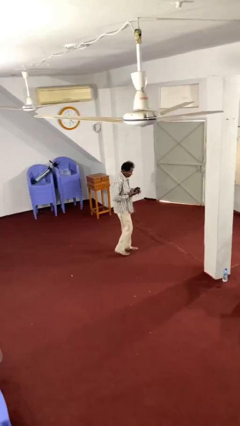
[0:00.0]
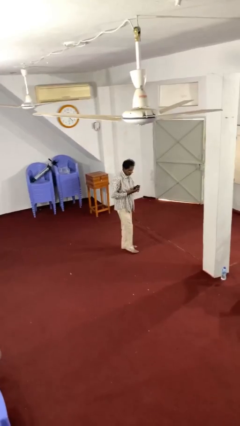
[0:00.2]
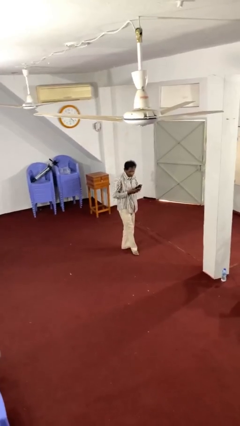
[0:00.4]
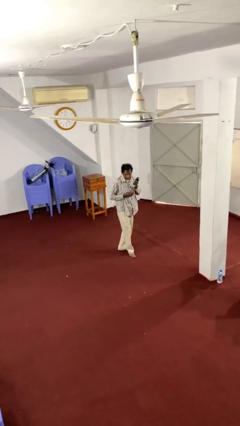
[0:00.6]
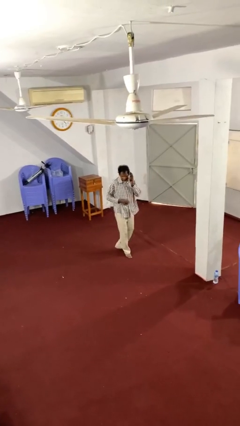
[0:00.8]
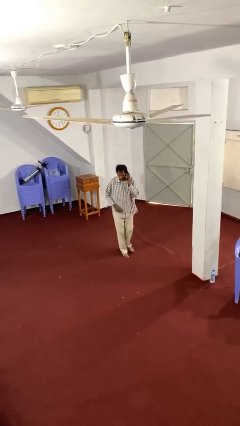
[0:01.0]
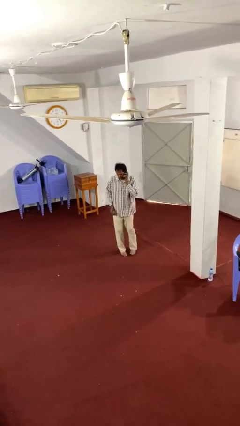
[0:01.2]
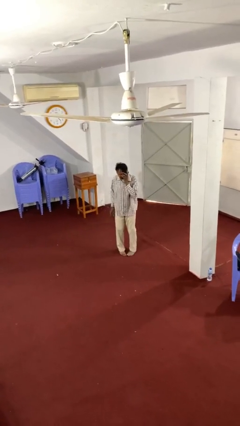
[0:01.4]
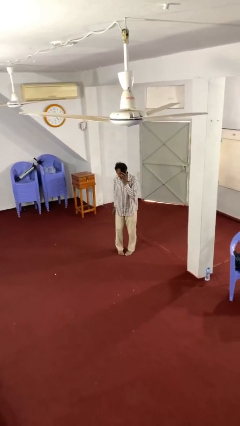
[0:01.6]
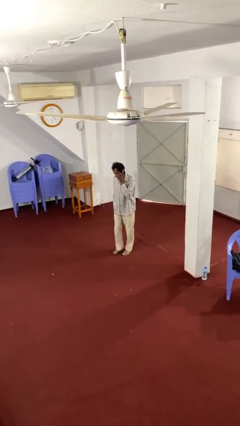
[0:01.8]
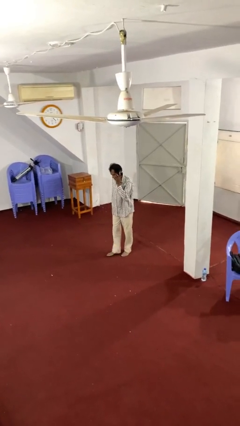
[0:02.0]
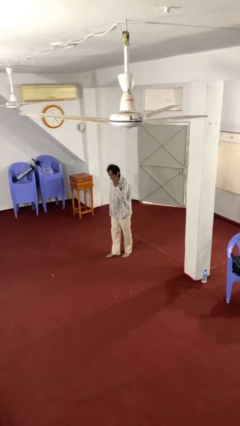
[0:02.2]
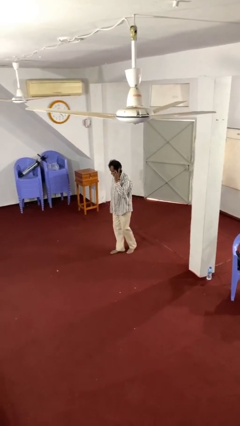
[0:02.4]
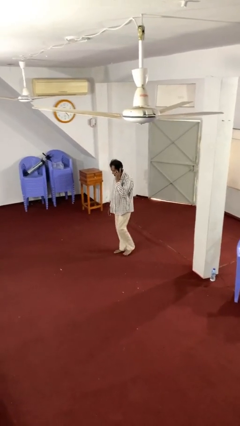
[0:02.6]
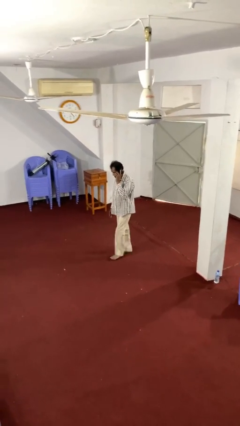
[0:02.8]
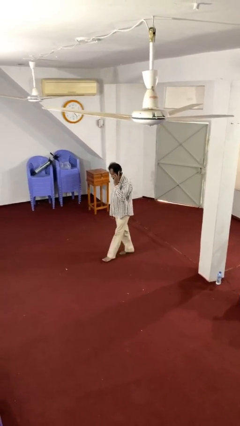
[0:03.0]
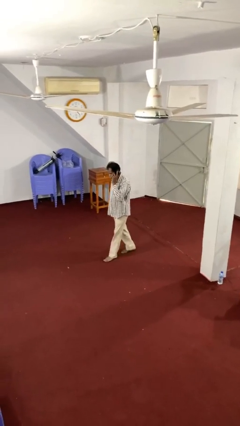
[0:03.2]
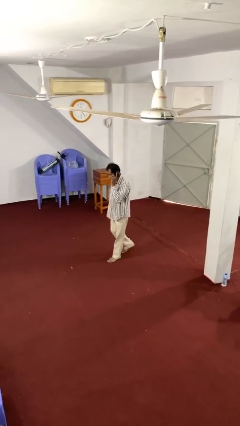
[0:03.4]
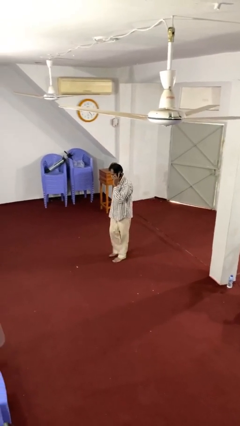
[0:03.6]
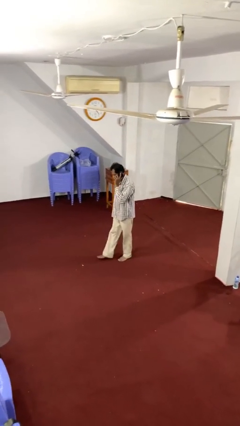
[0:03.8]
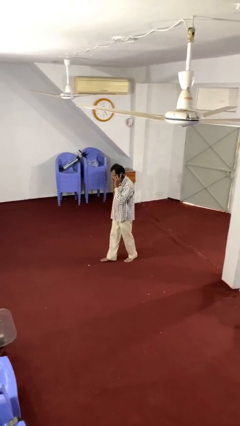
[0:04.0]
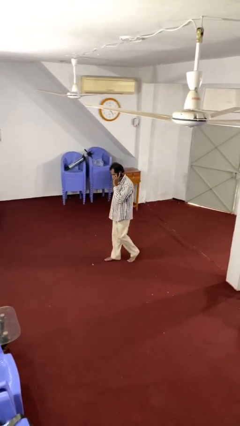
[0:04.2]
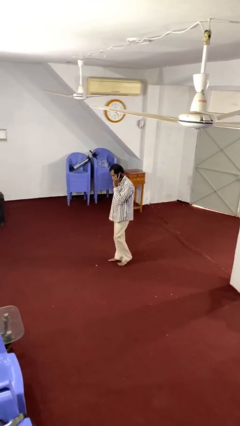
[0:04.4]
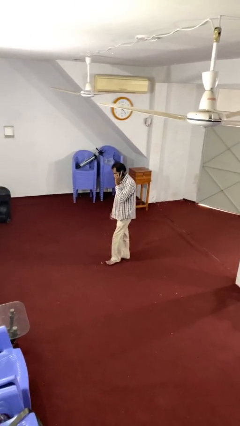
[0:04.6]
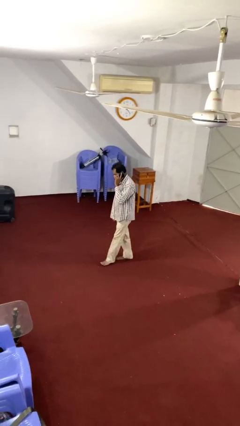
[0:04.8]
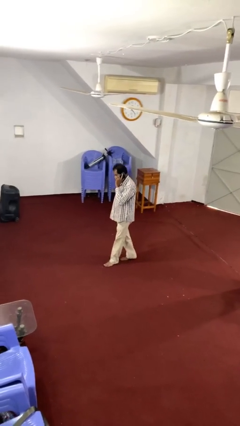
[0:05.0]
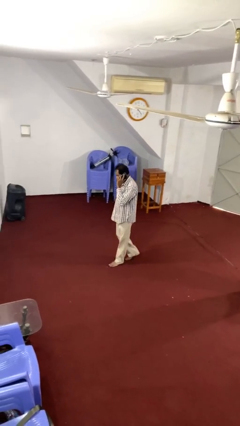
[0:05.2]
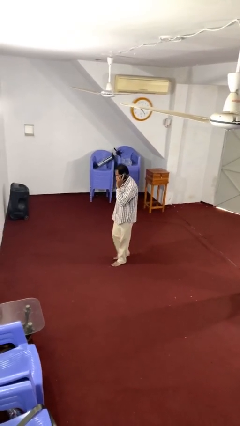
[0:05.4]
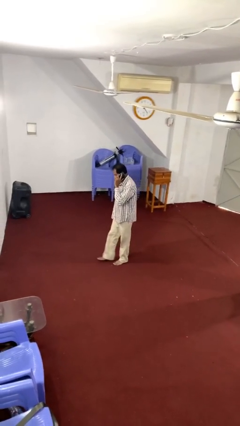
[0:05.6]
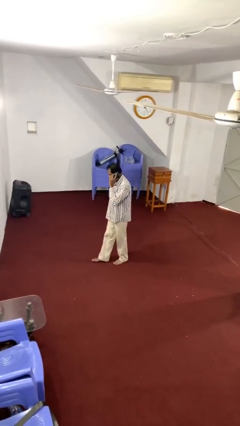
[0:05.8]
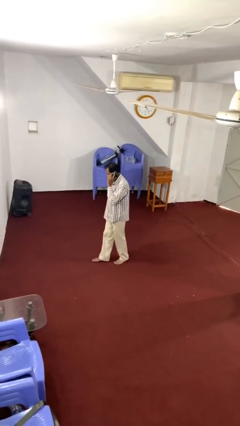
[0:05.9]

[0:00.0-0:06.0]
person talks on phone

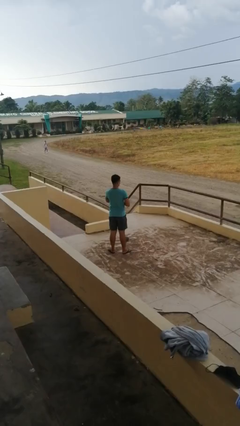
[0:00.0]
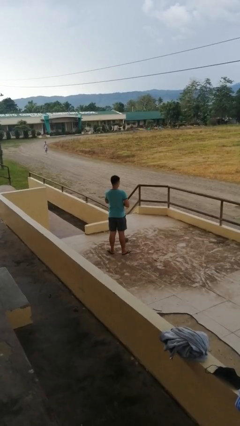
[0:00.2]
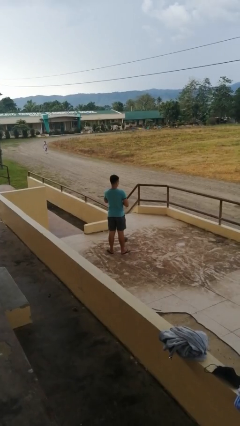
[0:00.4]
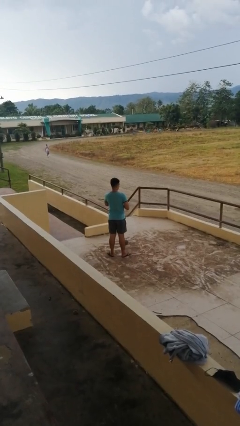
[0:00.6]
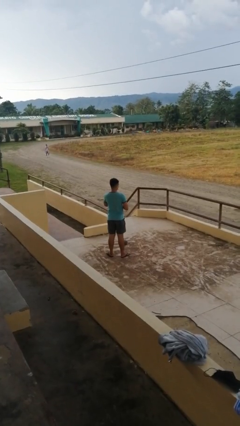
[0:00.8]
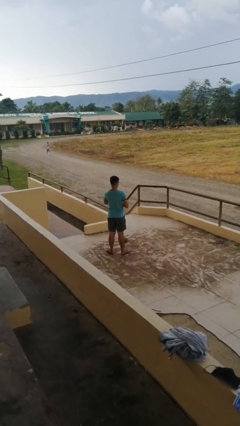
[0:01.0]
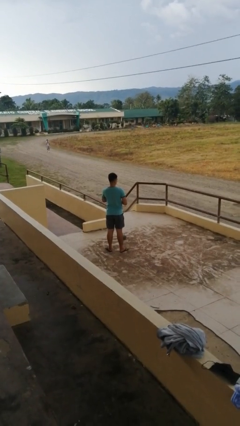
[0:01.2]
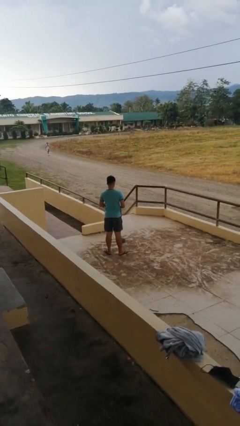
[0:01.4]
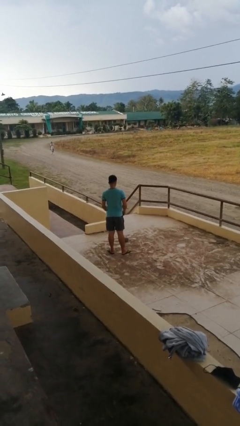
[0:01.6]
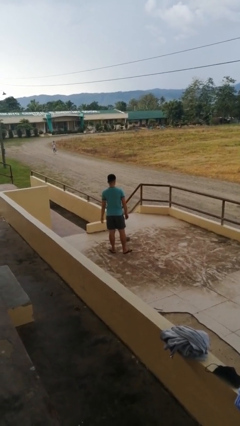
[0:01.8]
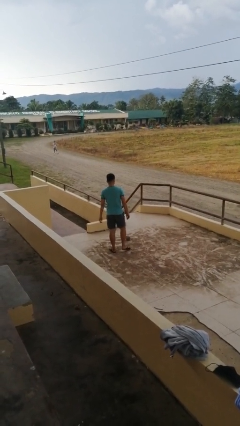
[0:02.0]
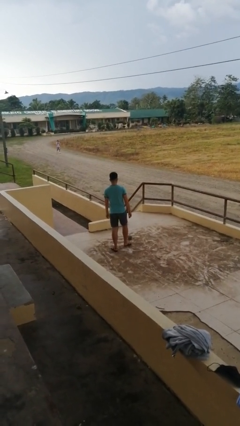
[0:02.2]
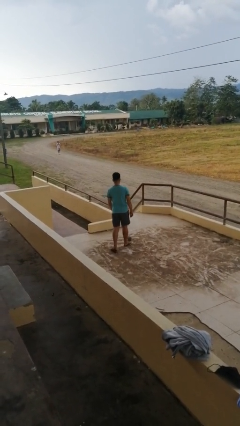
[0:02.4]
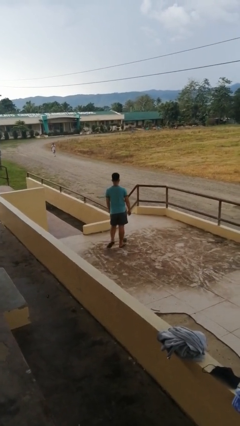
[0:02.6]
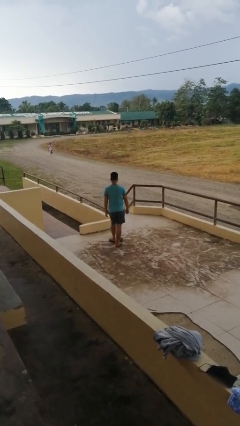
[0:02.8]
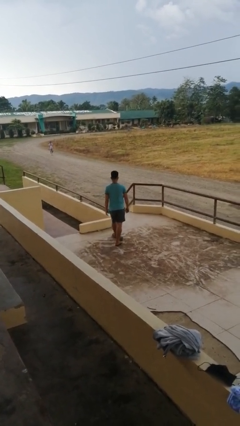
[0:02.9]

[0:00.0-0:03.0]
person trips on object on floor

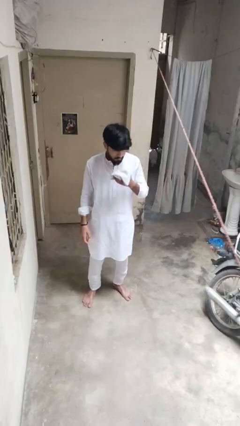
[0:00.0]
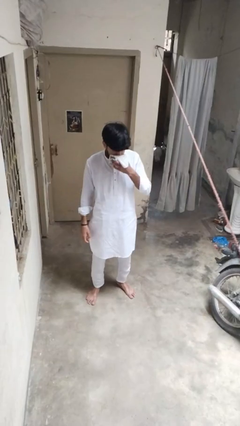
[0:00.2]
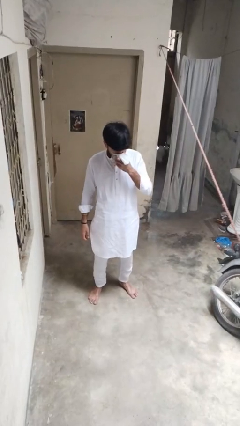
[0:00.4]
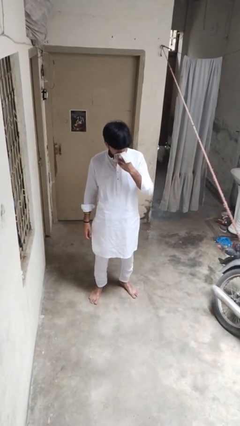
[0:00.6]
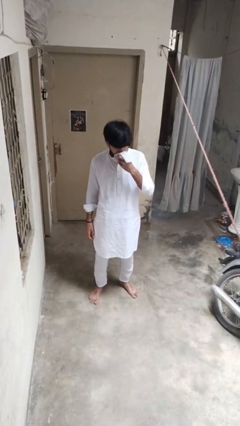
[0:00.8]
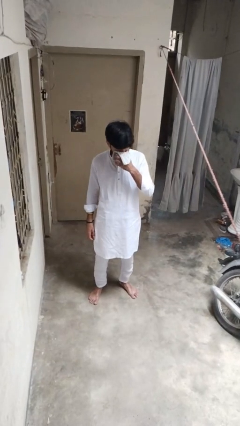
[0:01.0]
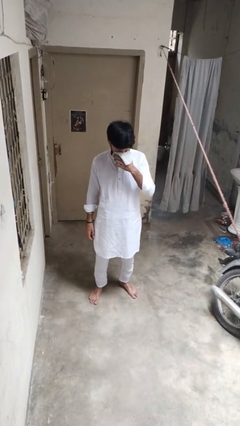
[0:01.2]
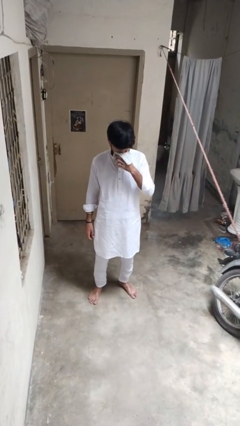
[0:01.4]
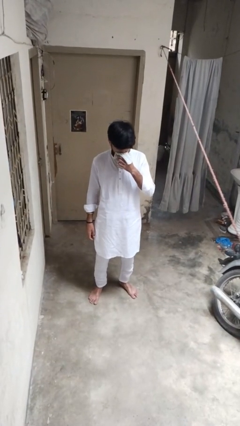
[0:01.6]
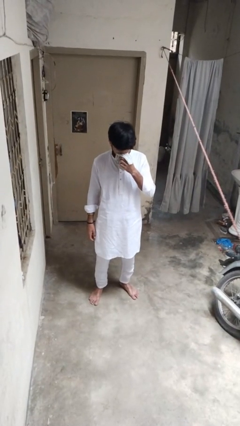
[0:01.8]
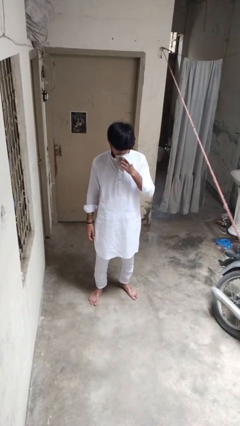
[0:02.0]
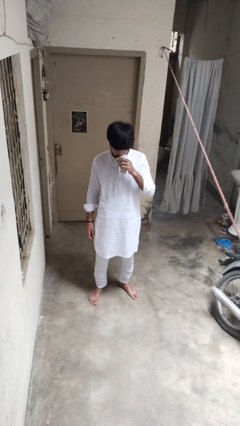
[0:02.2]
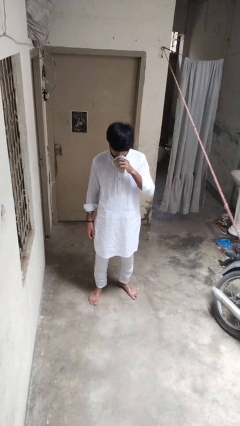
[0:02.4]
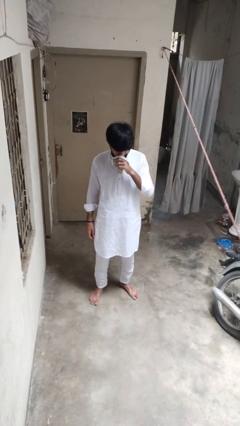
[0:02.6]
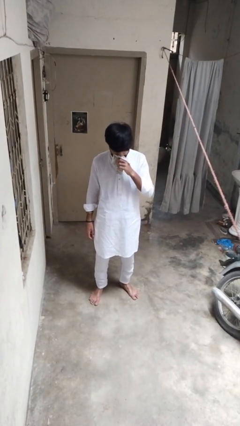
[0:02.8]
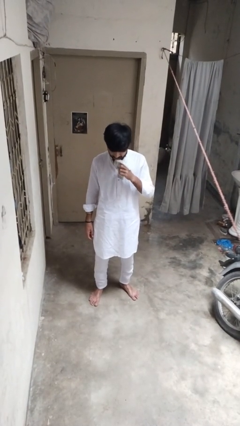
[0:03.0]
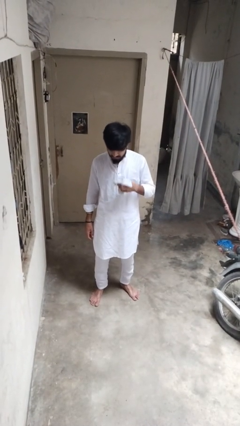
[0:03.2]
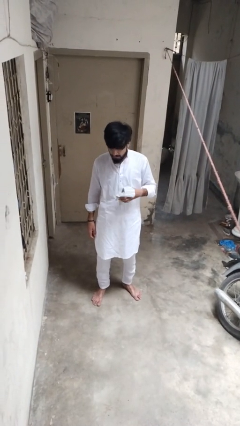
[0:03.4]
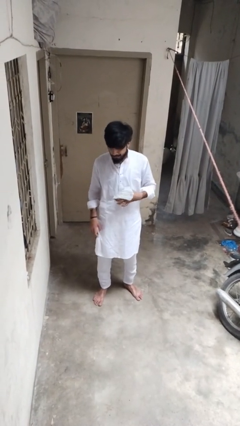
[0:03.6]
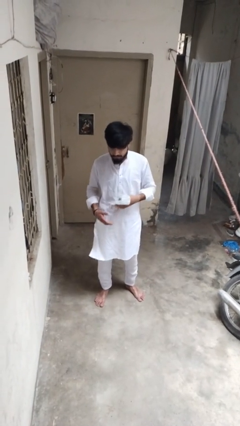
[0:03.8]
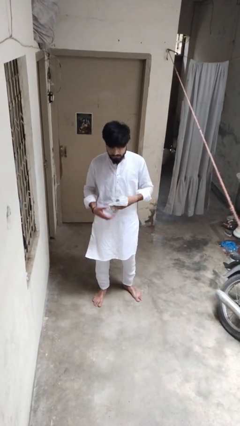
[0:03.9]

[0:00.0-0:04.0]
person blows nose

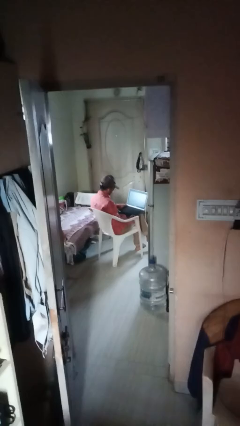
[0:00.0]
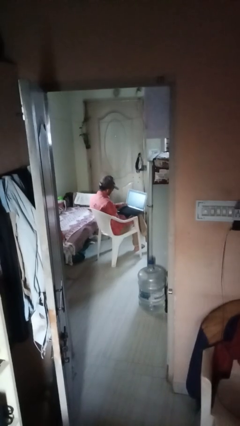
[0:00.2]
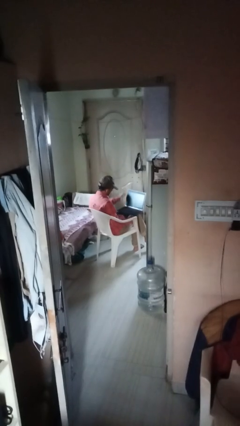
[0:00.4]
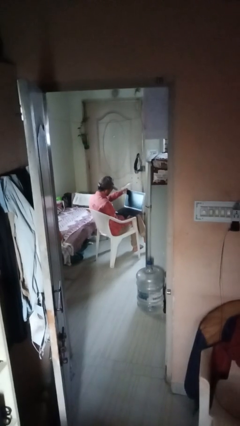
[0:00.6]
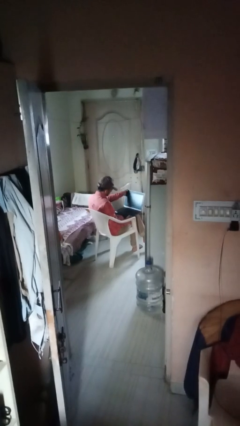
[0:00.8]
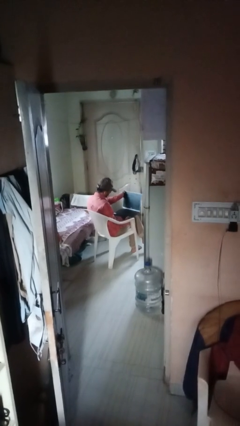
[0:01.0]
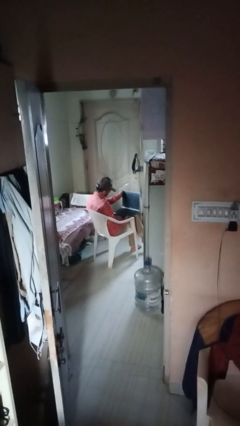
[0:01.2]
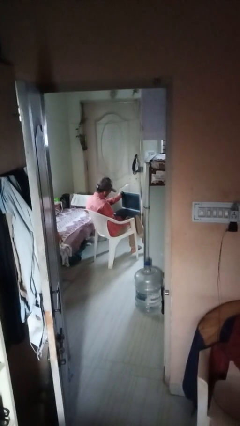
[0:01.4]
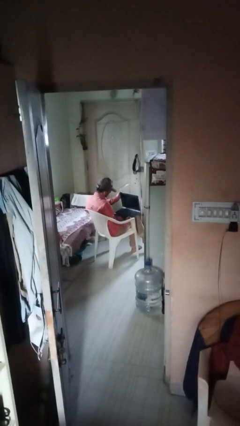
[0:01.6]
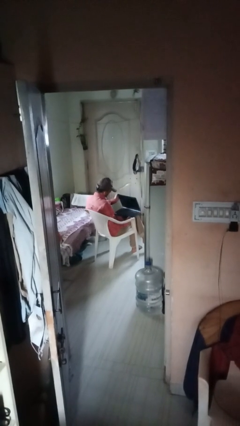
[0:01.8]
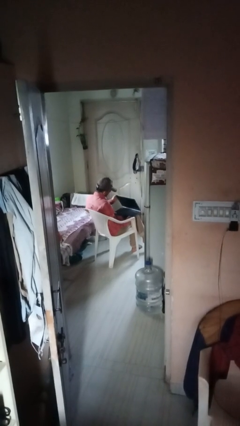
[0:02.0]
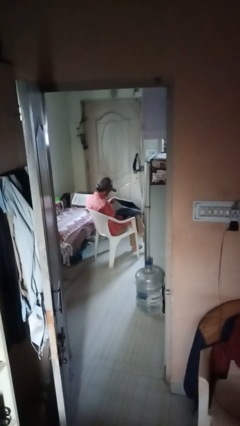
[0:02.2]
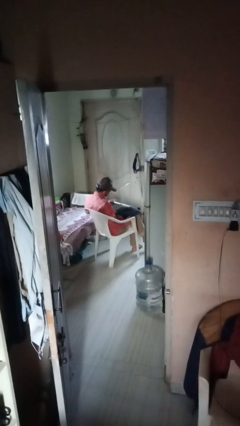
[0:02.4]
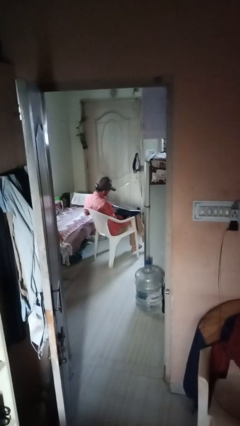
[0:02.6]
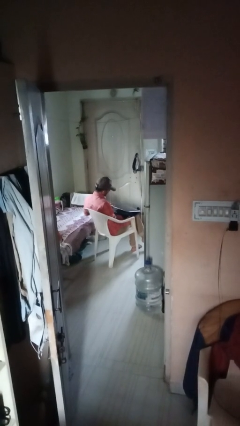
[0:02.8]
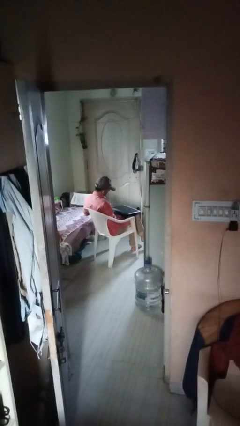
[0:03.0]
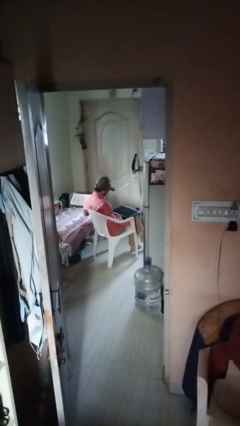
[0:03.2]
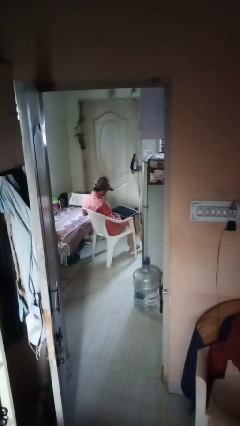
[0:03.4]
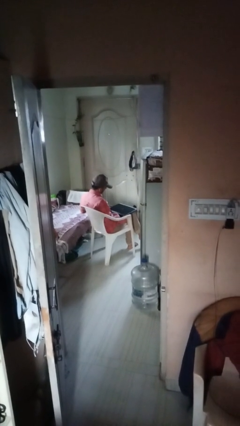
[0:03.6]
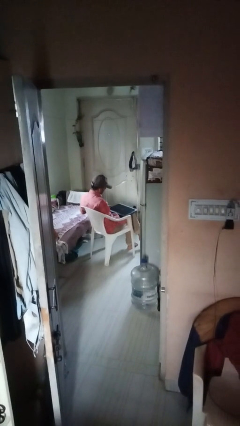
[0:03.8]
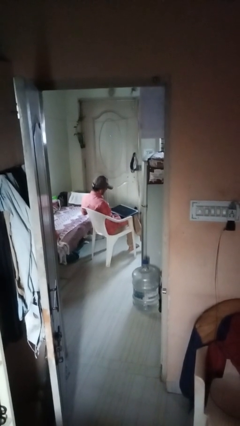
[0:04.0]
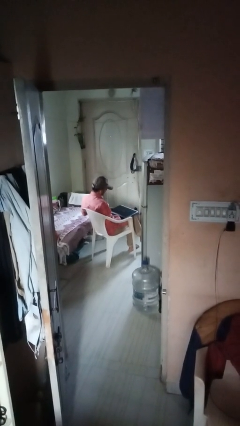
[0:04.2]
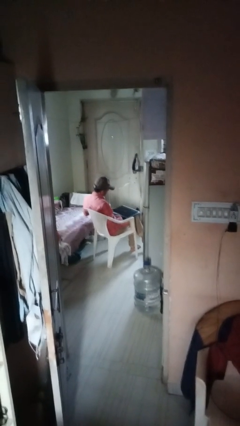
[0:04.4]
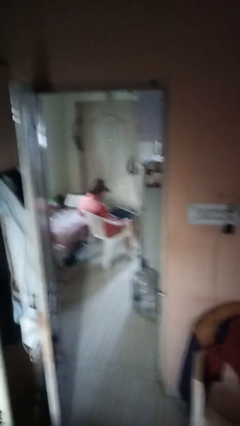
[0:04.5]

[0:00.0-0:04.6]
person closes laptop
